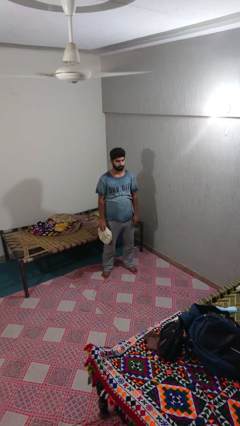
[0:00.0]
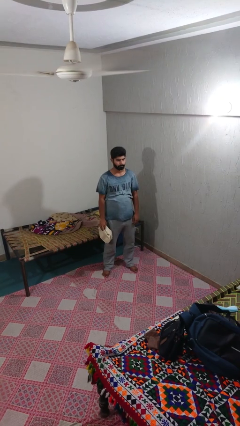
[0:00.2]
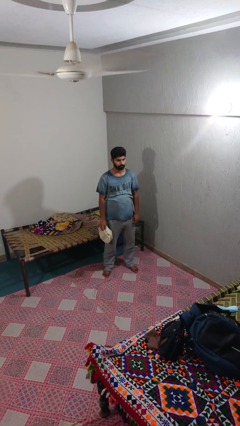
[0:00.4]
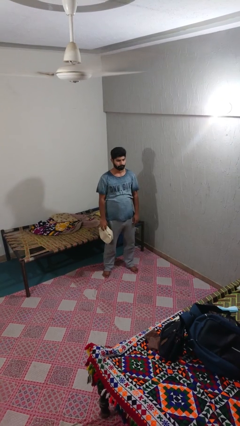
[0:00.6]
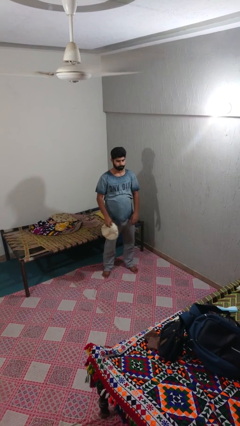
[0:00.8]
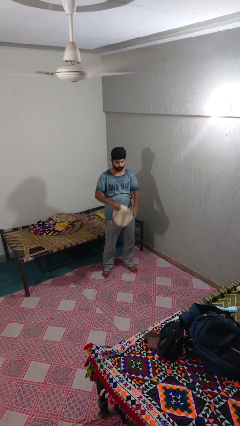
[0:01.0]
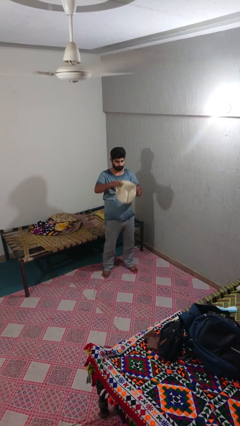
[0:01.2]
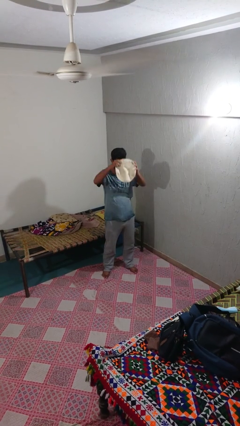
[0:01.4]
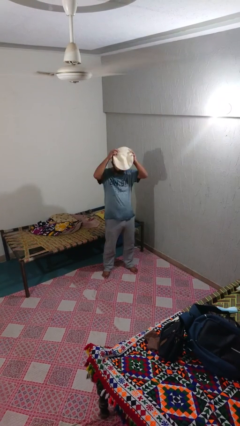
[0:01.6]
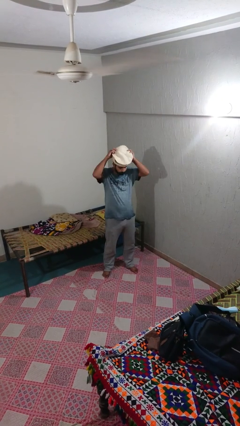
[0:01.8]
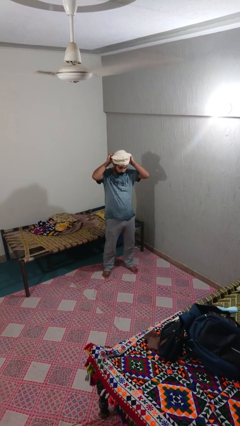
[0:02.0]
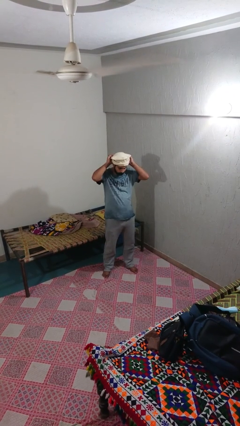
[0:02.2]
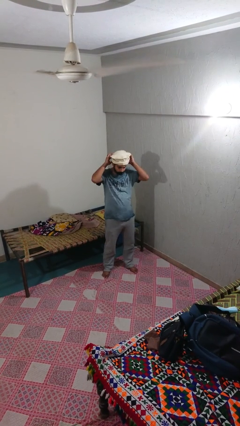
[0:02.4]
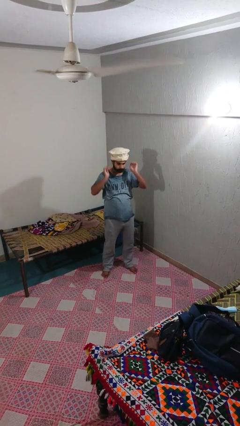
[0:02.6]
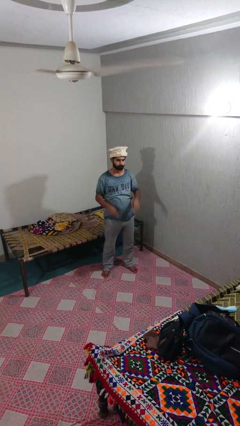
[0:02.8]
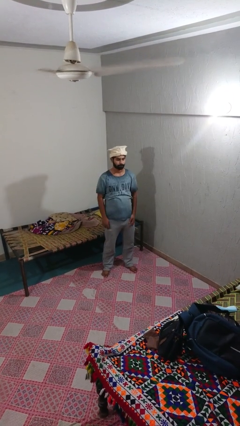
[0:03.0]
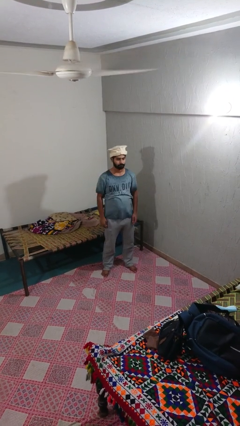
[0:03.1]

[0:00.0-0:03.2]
person puts on hat

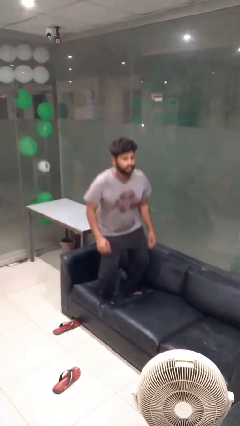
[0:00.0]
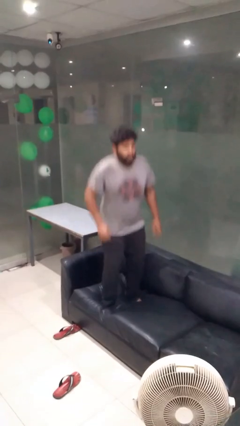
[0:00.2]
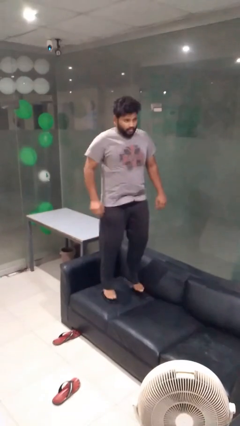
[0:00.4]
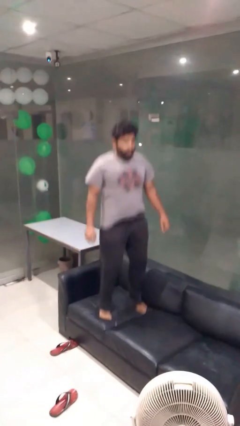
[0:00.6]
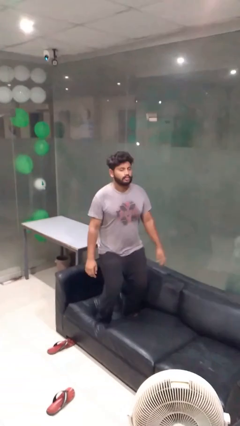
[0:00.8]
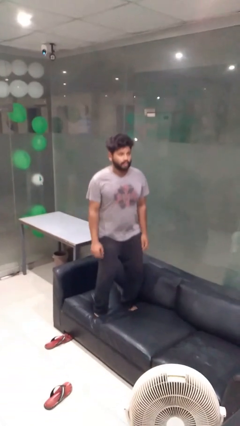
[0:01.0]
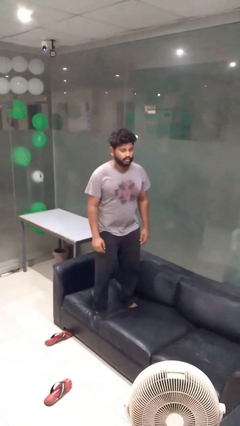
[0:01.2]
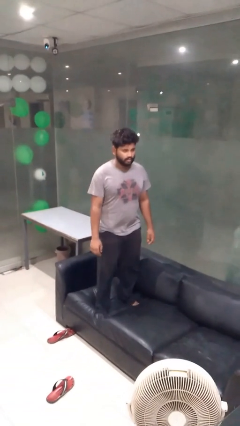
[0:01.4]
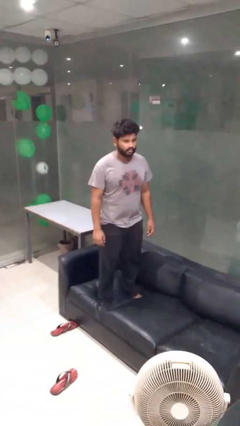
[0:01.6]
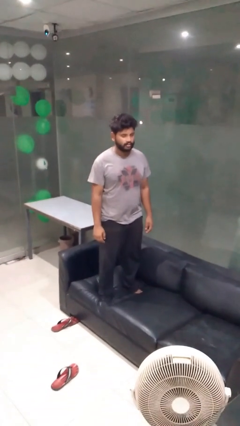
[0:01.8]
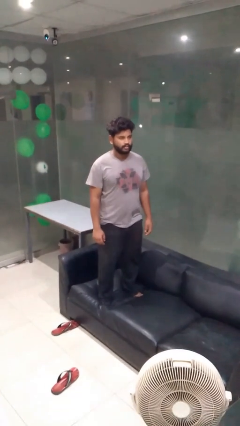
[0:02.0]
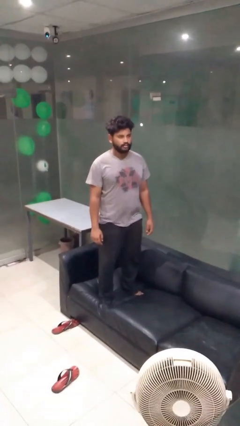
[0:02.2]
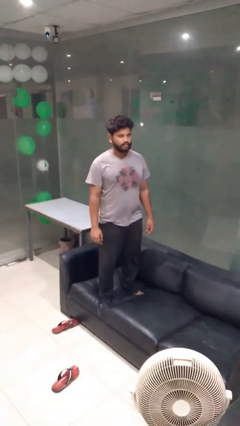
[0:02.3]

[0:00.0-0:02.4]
person jumps on couch

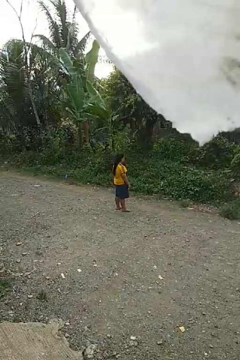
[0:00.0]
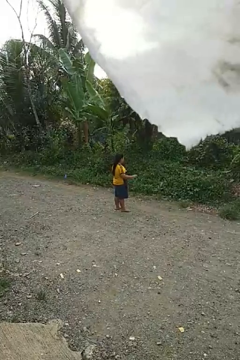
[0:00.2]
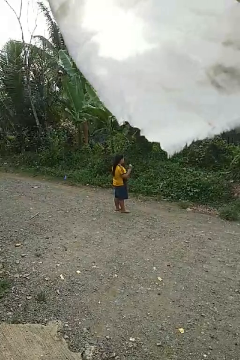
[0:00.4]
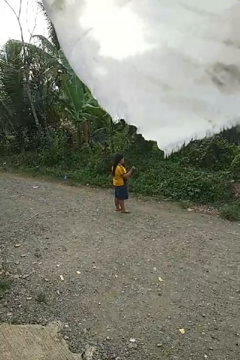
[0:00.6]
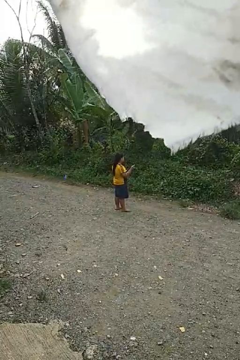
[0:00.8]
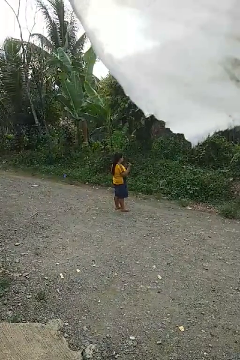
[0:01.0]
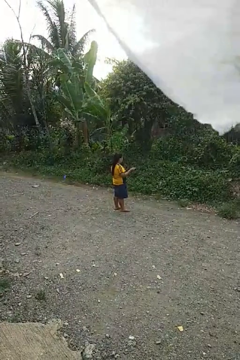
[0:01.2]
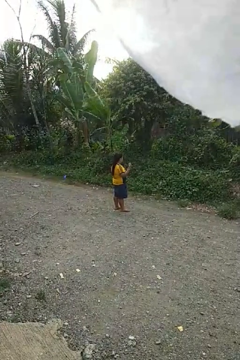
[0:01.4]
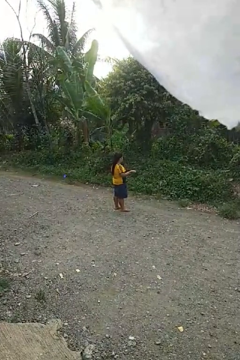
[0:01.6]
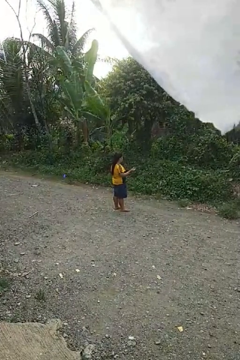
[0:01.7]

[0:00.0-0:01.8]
person snaps fingers

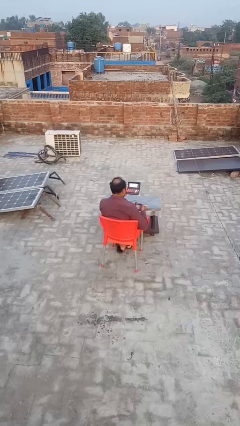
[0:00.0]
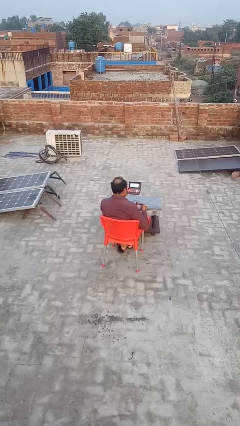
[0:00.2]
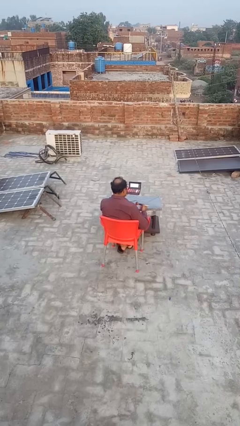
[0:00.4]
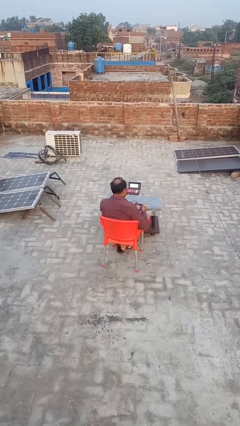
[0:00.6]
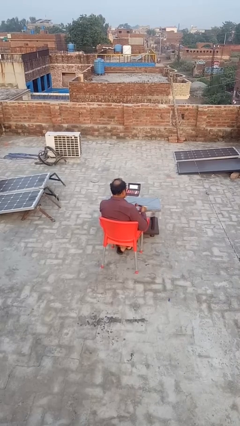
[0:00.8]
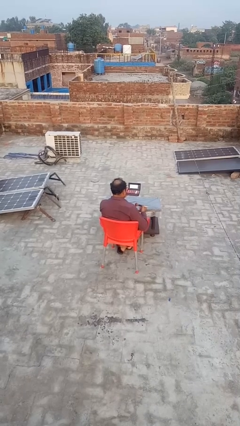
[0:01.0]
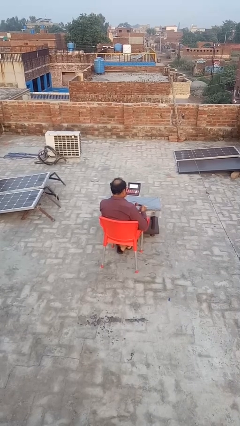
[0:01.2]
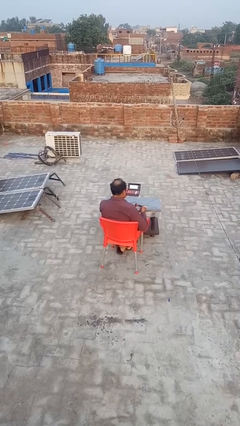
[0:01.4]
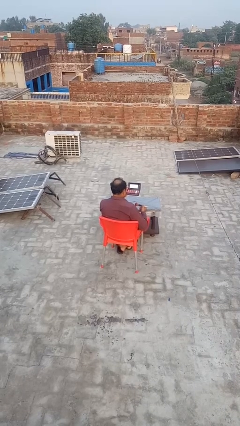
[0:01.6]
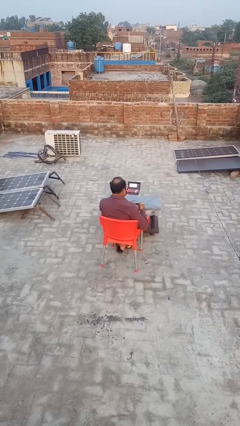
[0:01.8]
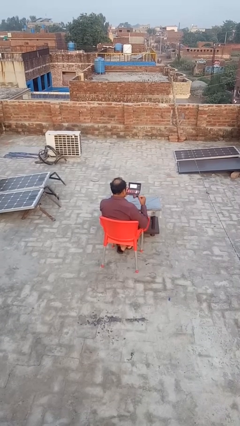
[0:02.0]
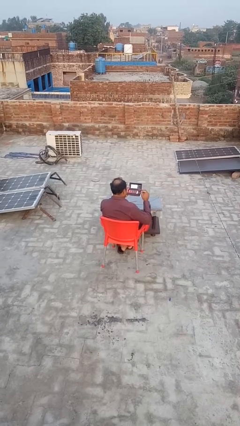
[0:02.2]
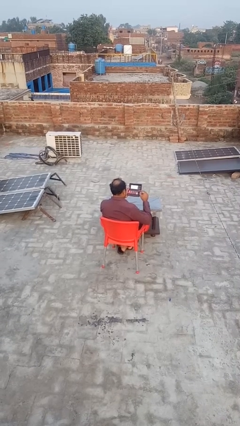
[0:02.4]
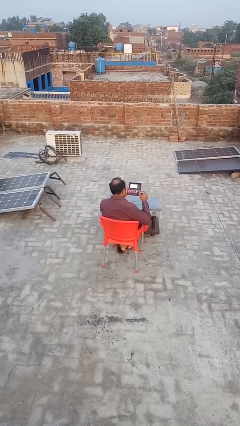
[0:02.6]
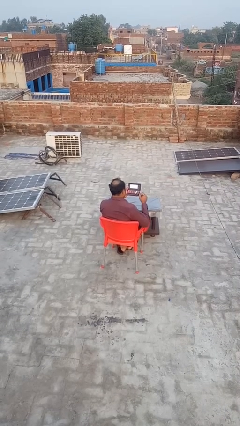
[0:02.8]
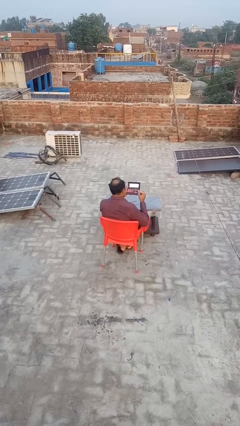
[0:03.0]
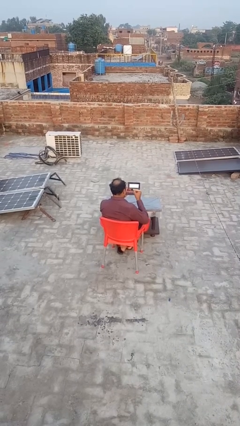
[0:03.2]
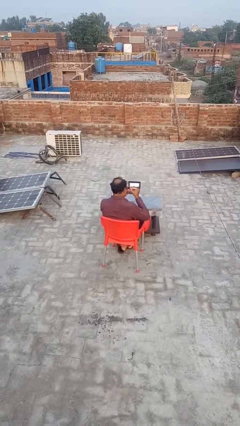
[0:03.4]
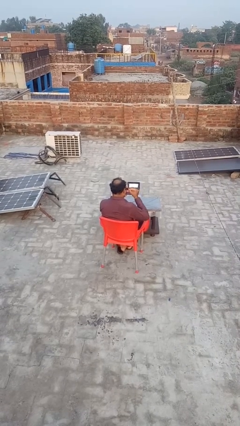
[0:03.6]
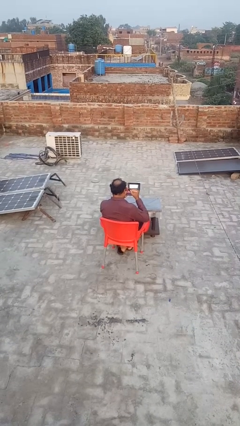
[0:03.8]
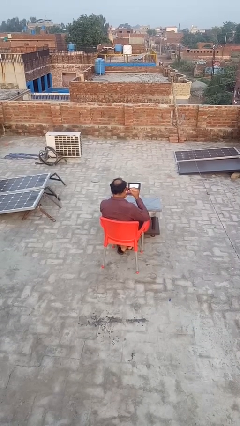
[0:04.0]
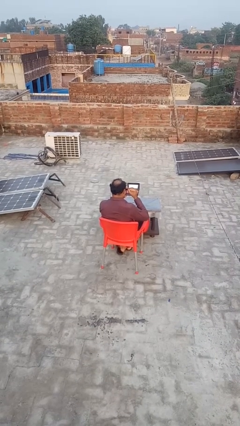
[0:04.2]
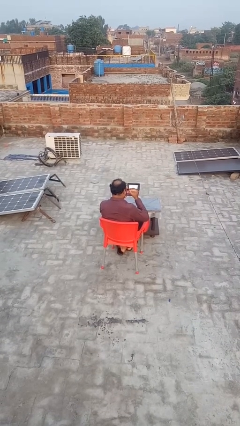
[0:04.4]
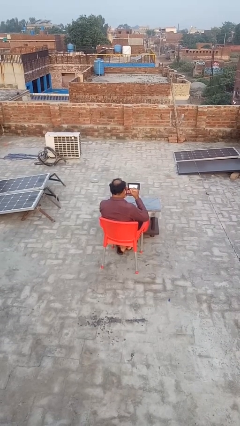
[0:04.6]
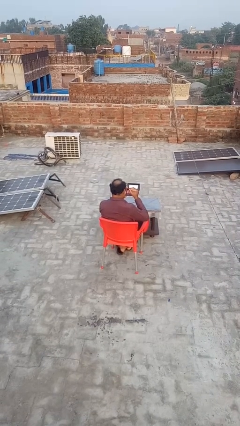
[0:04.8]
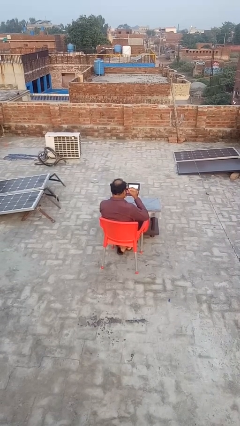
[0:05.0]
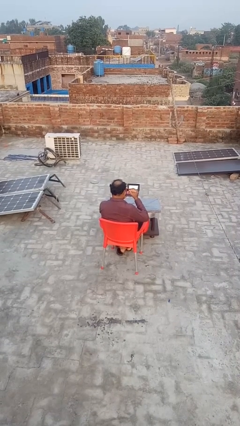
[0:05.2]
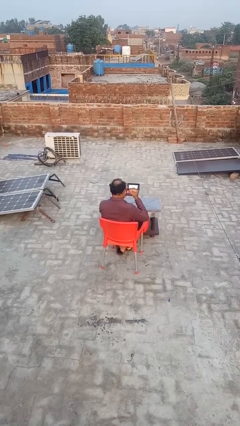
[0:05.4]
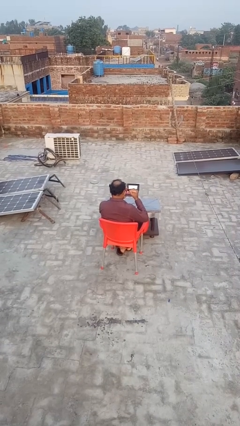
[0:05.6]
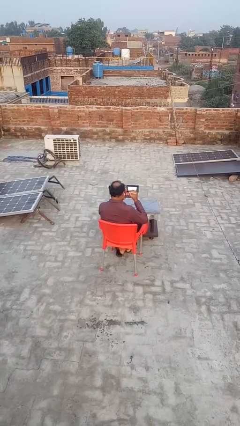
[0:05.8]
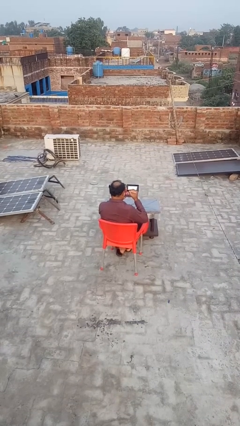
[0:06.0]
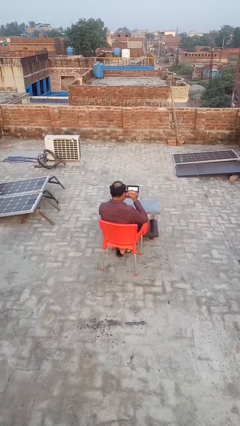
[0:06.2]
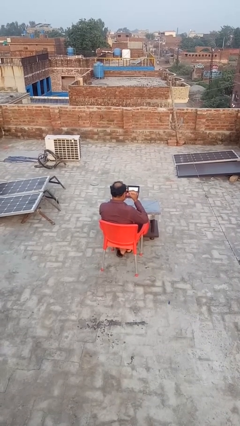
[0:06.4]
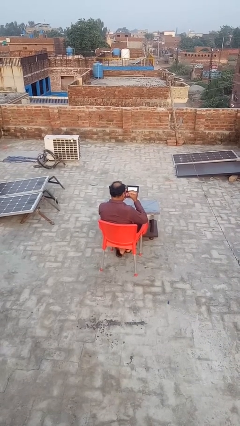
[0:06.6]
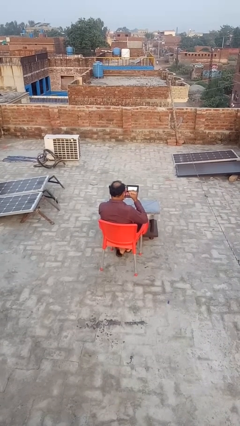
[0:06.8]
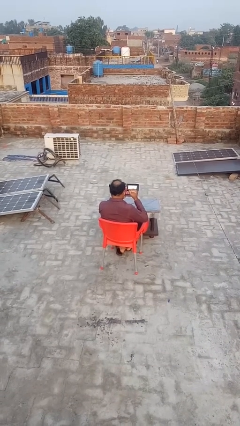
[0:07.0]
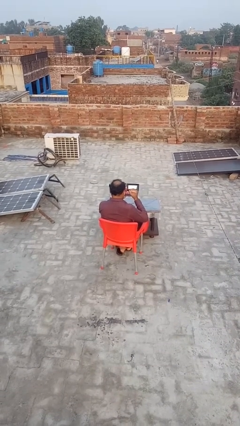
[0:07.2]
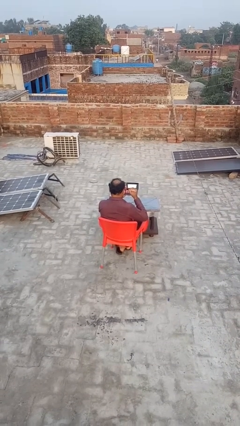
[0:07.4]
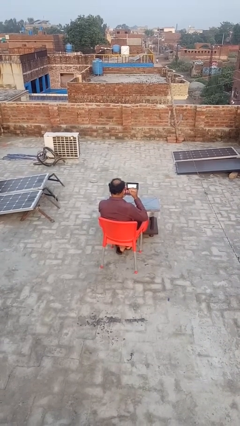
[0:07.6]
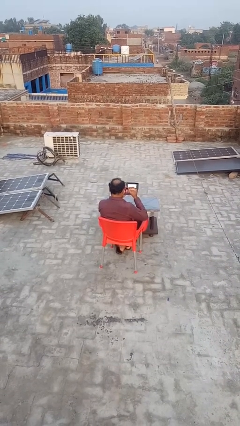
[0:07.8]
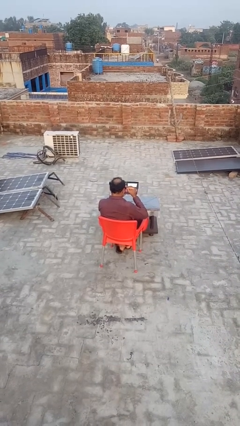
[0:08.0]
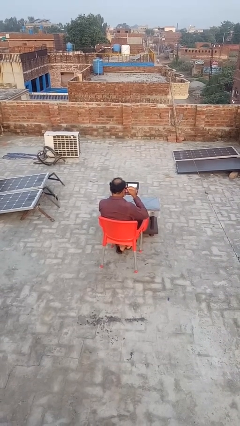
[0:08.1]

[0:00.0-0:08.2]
person applies eye makeup

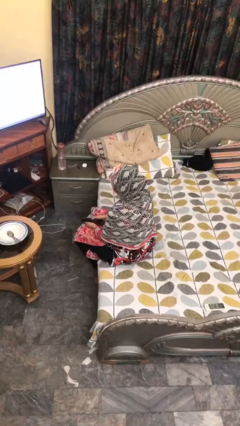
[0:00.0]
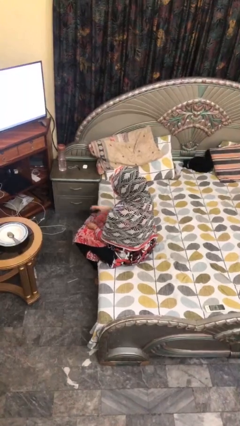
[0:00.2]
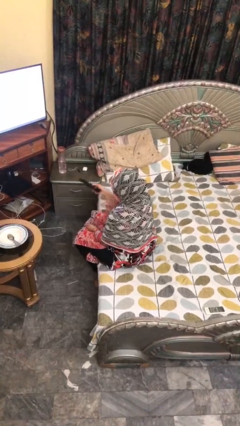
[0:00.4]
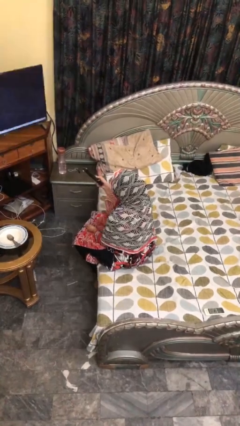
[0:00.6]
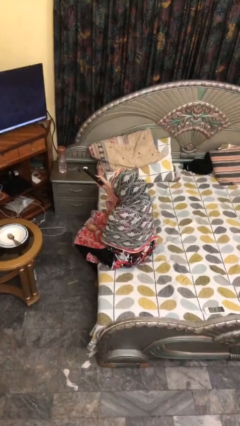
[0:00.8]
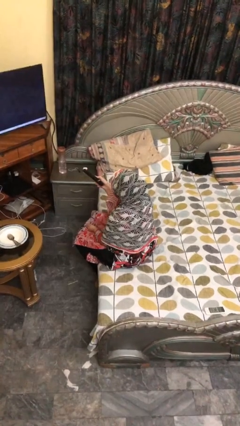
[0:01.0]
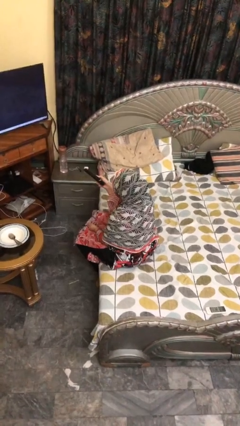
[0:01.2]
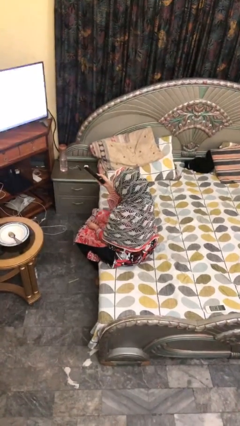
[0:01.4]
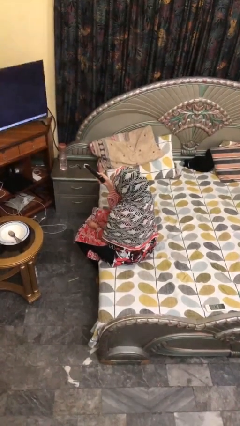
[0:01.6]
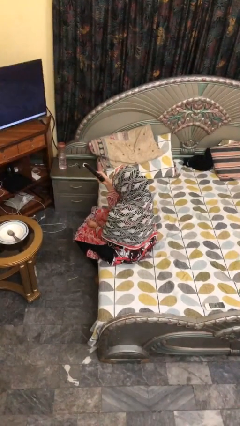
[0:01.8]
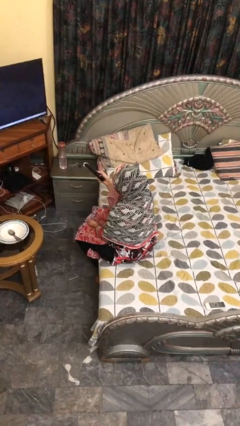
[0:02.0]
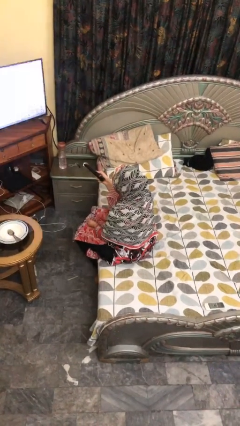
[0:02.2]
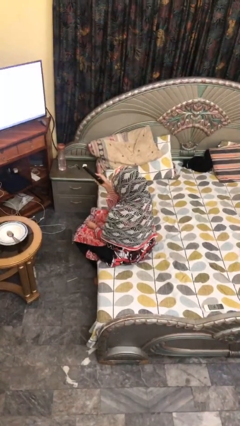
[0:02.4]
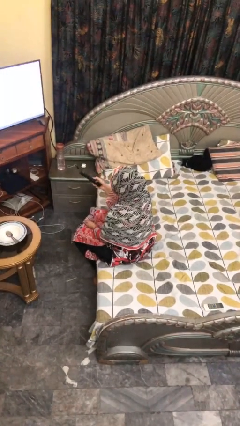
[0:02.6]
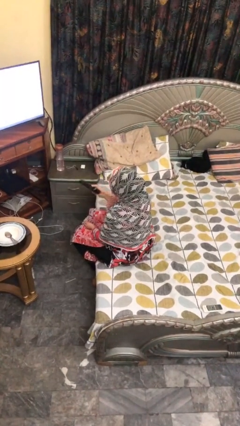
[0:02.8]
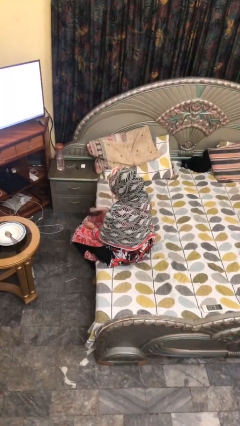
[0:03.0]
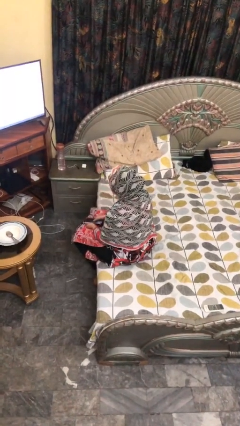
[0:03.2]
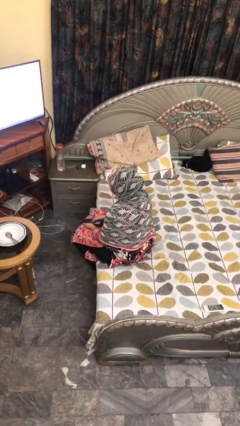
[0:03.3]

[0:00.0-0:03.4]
person uses television remote
